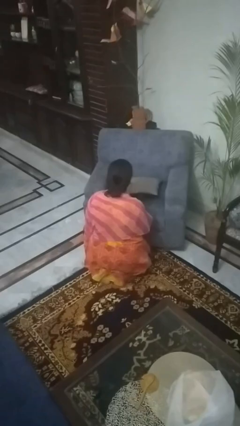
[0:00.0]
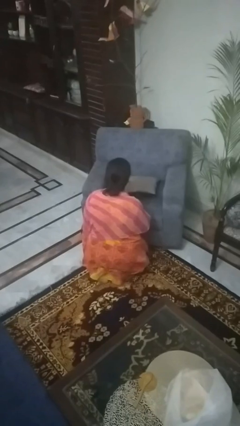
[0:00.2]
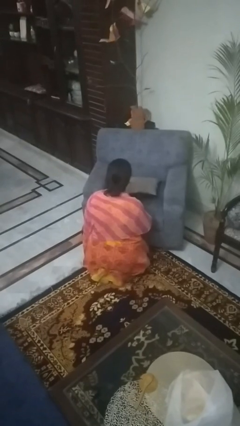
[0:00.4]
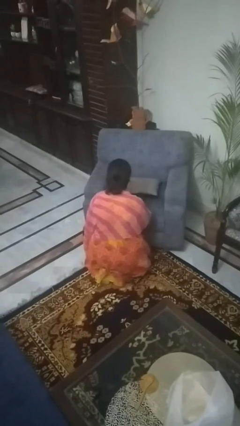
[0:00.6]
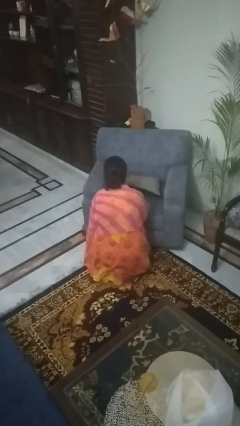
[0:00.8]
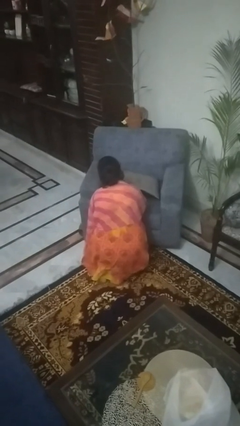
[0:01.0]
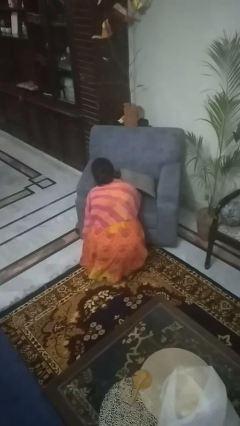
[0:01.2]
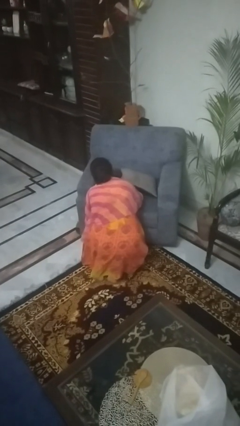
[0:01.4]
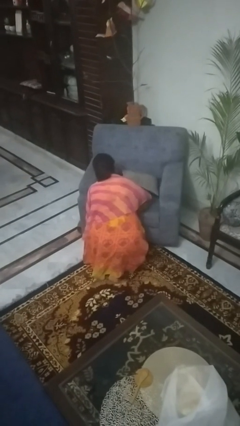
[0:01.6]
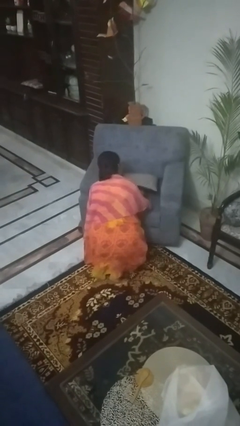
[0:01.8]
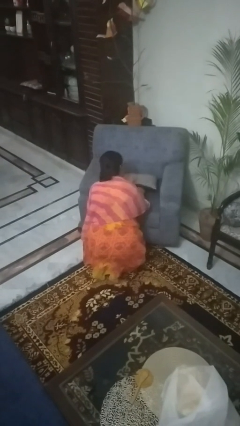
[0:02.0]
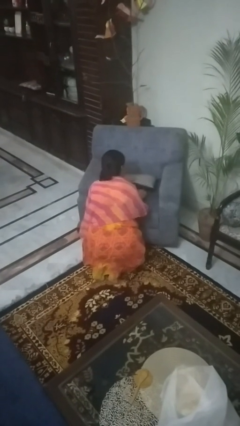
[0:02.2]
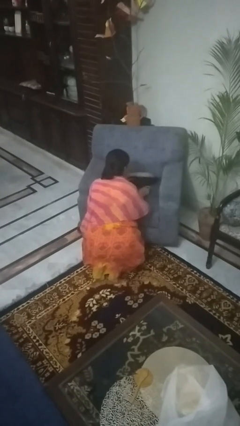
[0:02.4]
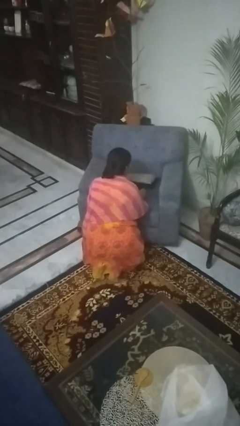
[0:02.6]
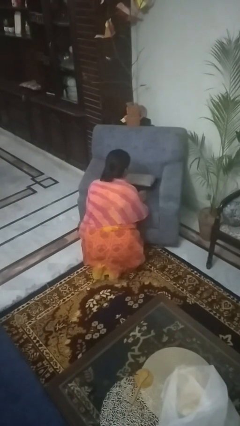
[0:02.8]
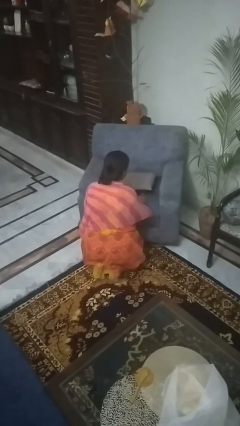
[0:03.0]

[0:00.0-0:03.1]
person searches in couch

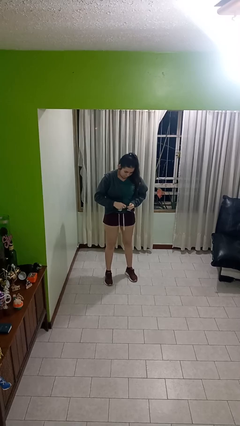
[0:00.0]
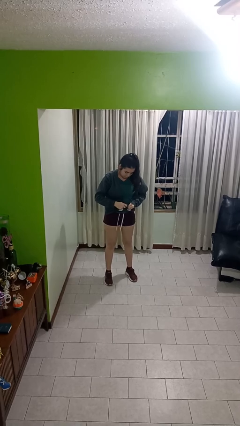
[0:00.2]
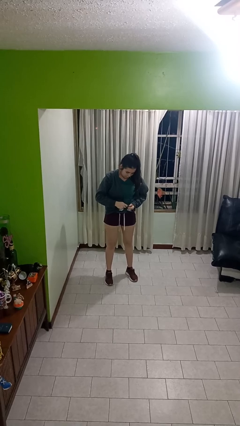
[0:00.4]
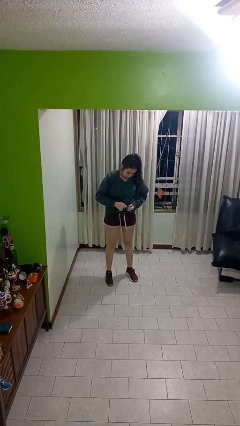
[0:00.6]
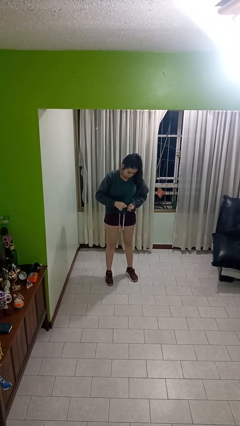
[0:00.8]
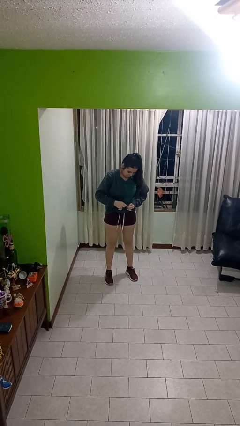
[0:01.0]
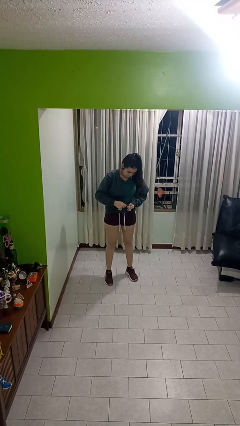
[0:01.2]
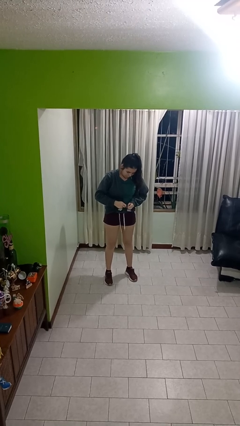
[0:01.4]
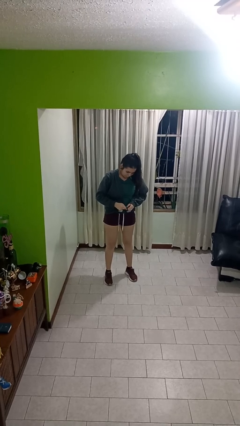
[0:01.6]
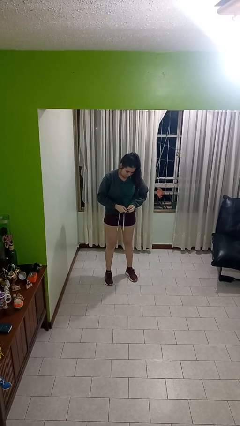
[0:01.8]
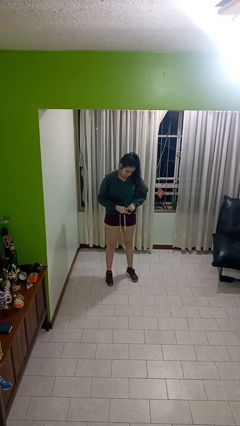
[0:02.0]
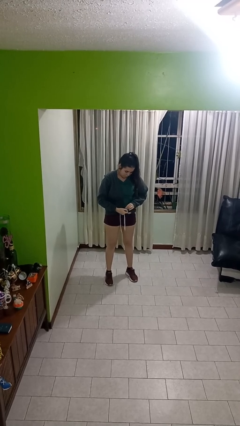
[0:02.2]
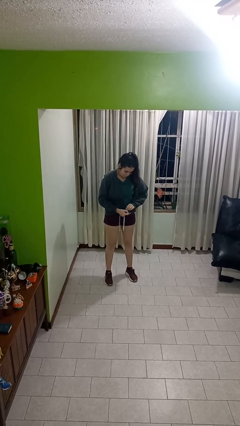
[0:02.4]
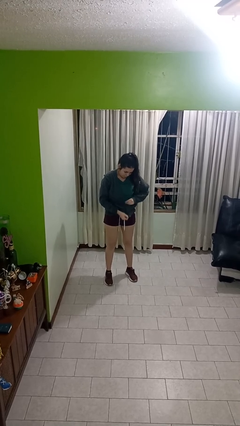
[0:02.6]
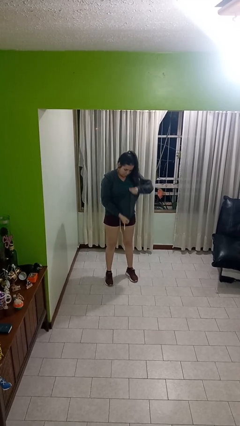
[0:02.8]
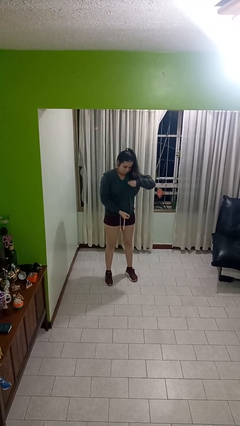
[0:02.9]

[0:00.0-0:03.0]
person zips up jacket

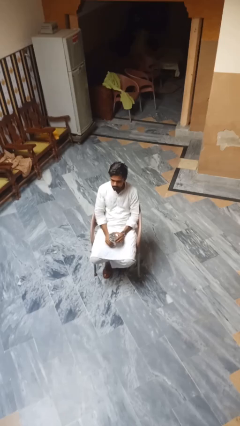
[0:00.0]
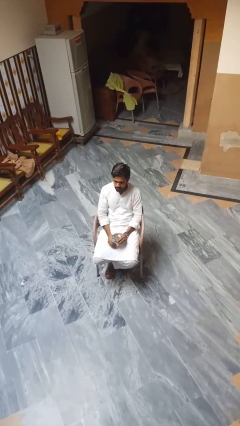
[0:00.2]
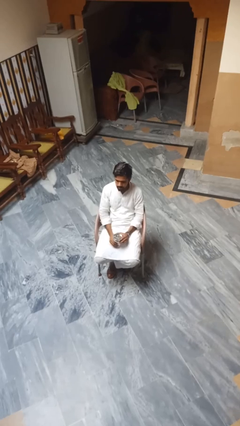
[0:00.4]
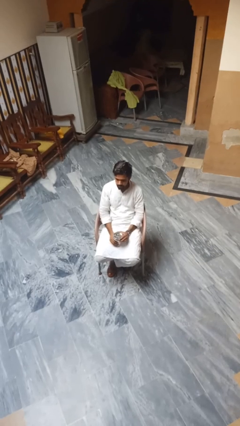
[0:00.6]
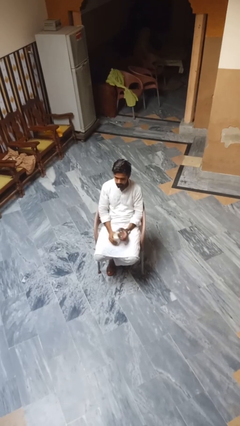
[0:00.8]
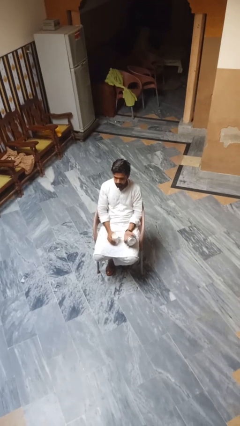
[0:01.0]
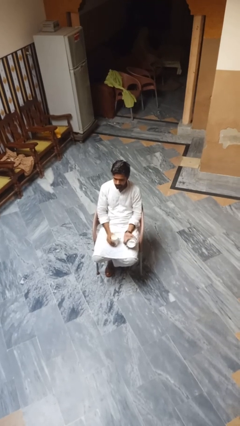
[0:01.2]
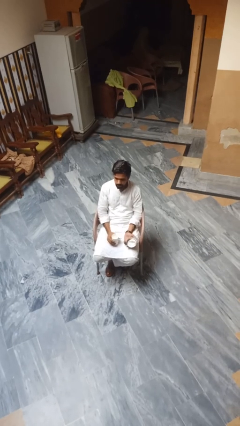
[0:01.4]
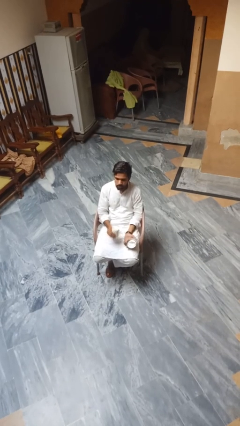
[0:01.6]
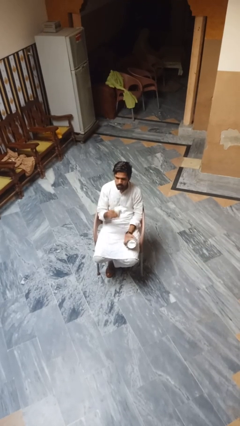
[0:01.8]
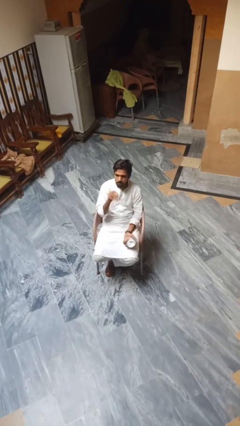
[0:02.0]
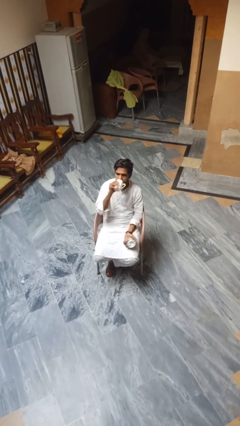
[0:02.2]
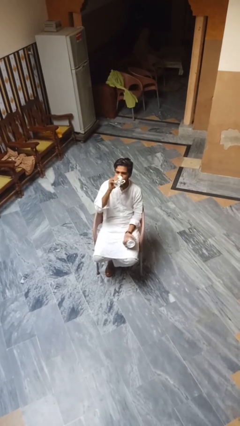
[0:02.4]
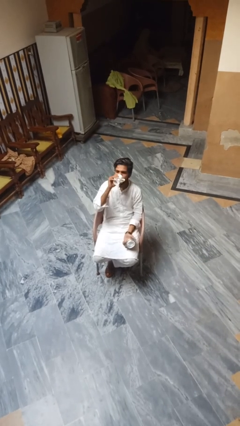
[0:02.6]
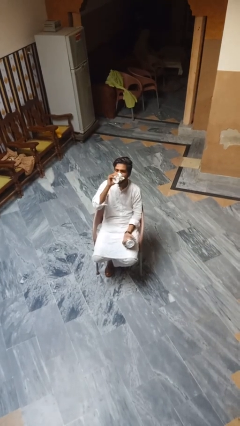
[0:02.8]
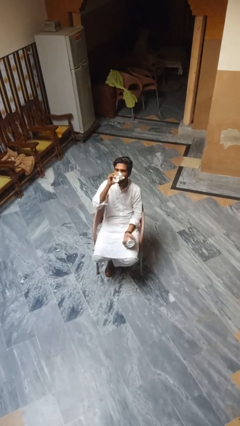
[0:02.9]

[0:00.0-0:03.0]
person opens beverage can

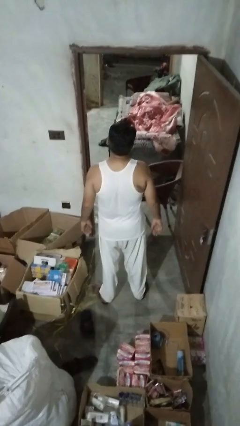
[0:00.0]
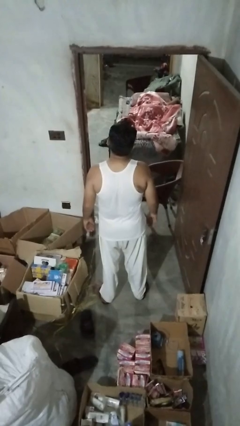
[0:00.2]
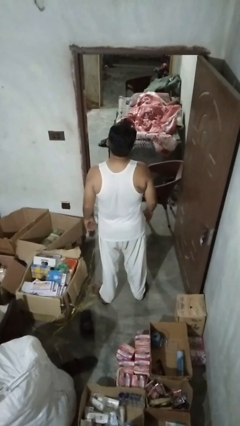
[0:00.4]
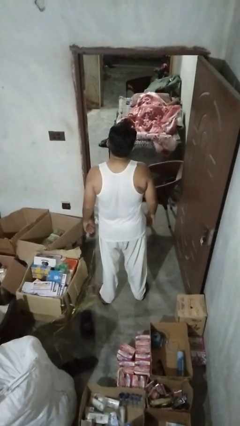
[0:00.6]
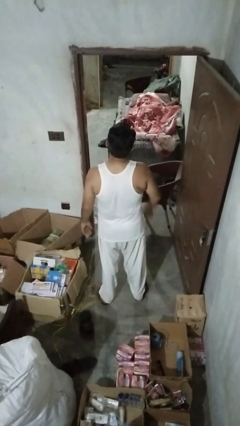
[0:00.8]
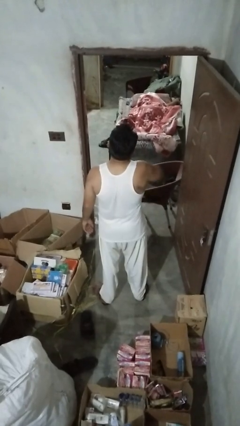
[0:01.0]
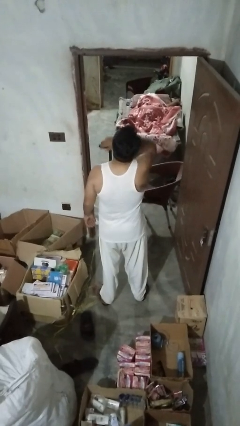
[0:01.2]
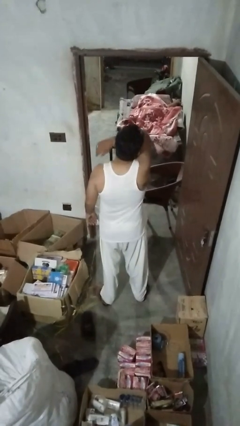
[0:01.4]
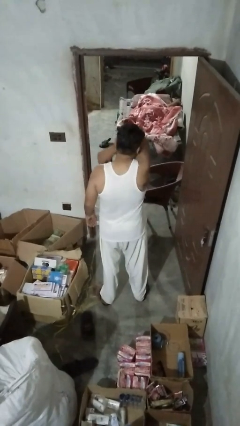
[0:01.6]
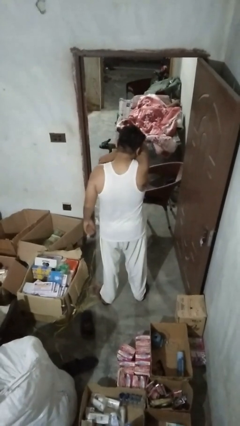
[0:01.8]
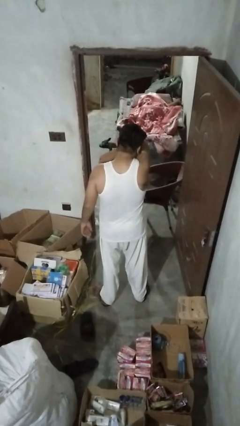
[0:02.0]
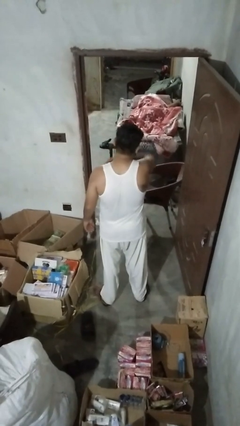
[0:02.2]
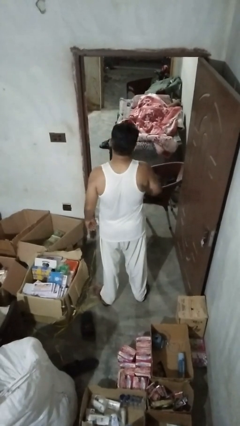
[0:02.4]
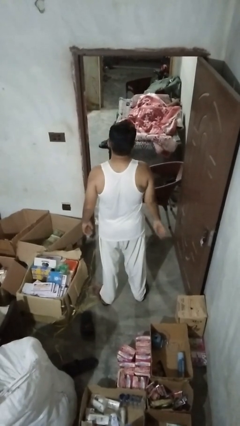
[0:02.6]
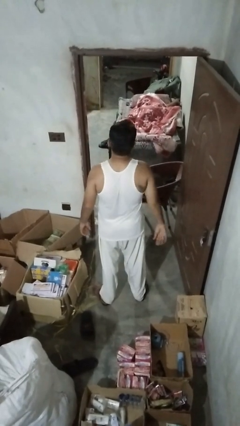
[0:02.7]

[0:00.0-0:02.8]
person sneezes into arm

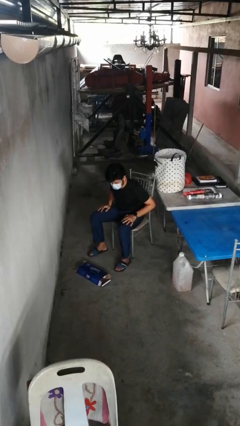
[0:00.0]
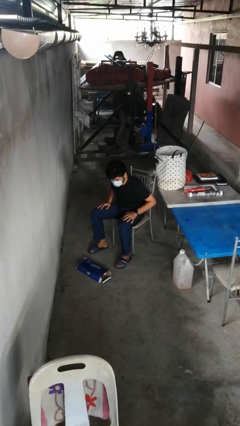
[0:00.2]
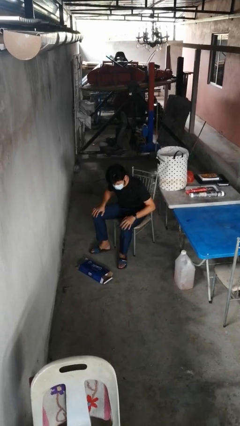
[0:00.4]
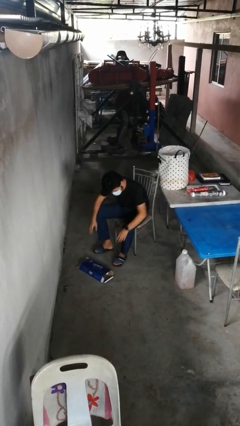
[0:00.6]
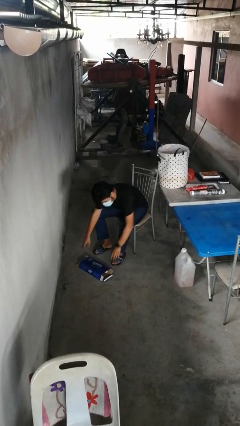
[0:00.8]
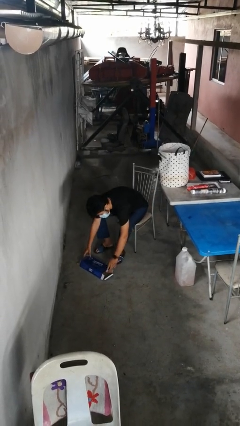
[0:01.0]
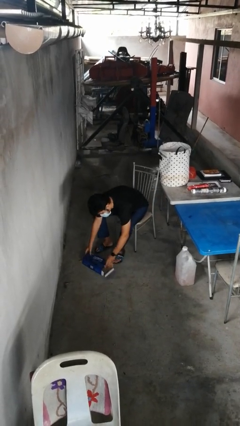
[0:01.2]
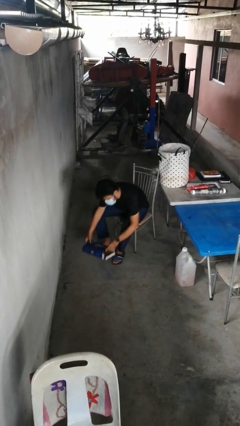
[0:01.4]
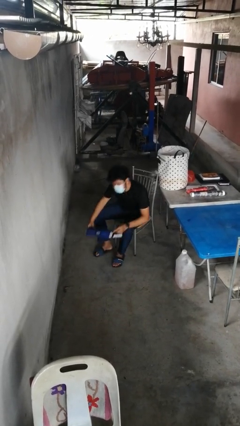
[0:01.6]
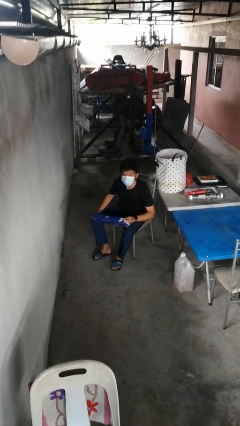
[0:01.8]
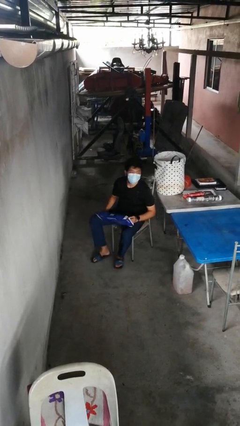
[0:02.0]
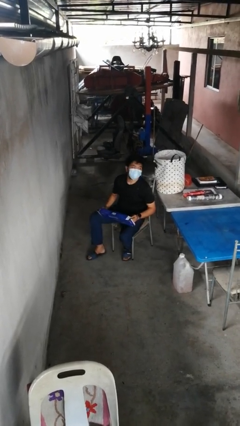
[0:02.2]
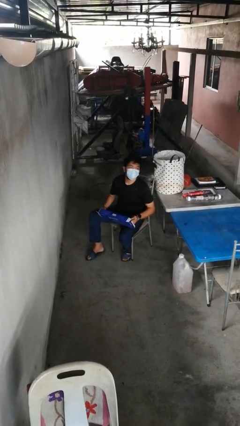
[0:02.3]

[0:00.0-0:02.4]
person picks up object from floor

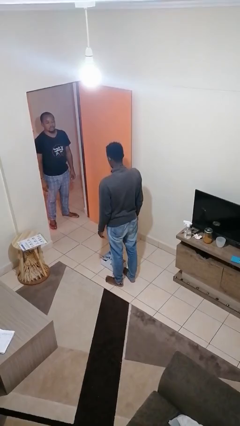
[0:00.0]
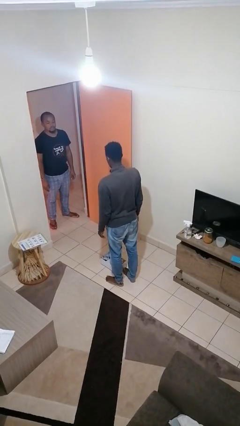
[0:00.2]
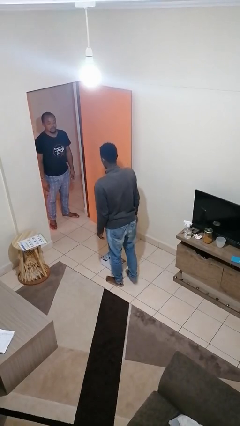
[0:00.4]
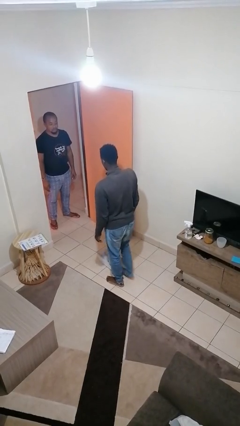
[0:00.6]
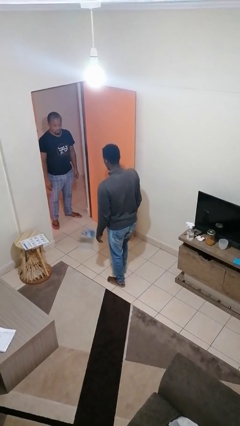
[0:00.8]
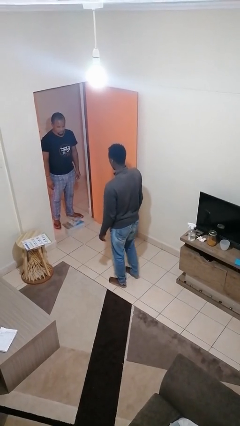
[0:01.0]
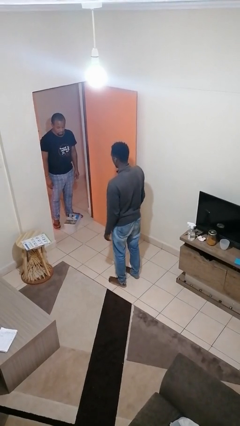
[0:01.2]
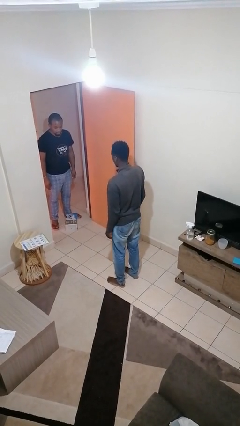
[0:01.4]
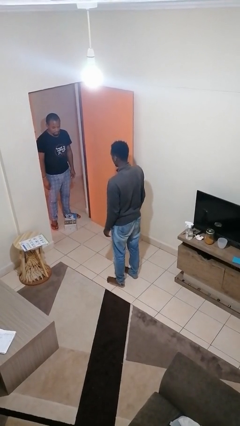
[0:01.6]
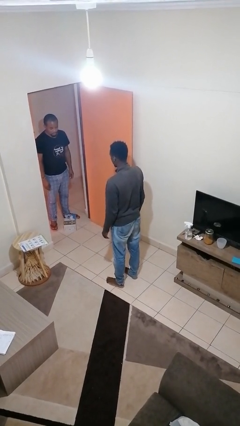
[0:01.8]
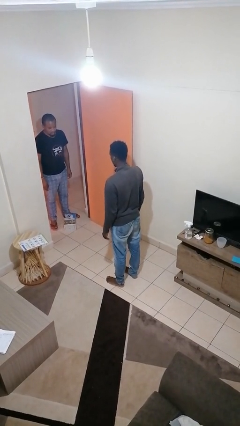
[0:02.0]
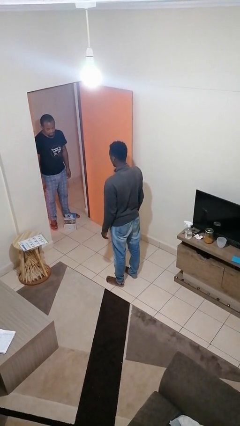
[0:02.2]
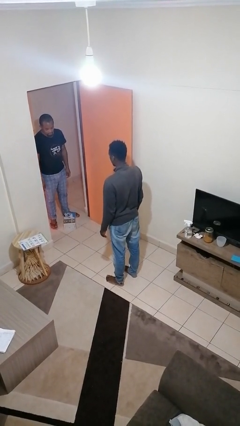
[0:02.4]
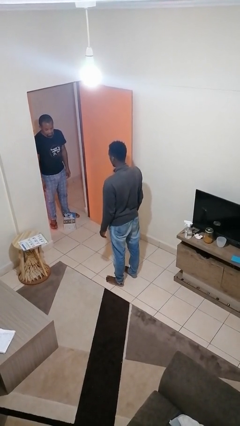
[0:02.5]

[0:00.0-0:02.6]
person kicks object to person
